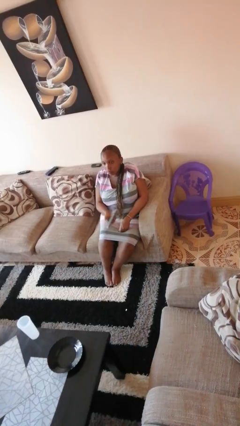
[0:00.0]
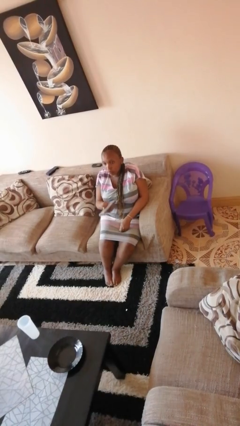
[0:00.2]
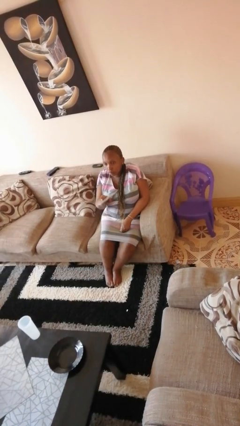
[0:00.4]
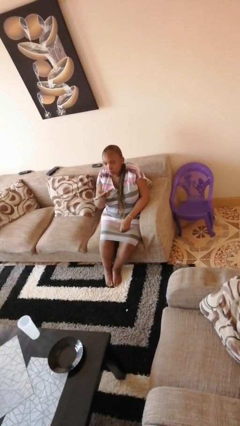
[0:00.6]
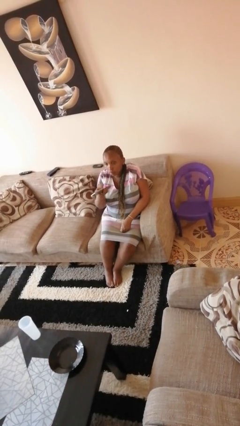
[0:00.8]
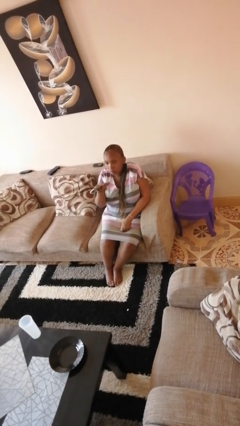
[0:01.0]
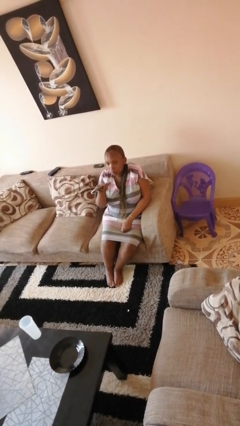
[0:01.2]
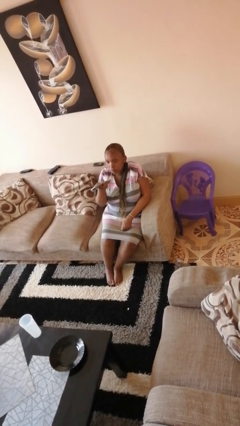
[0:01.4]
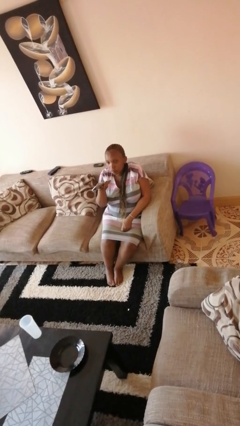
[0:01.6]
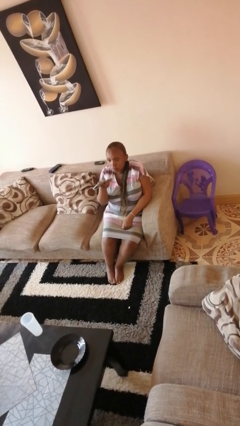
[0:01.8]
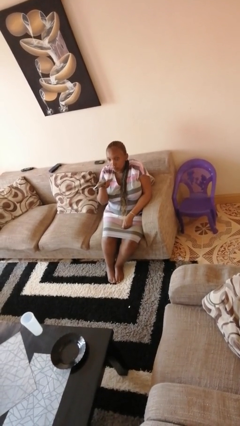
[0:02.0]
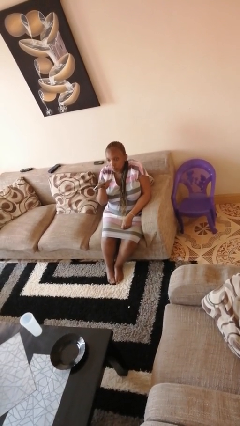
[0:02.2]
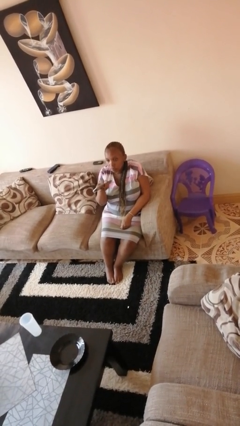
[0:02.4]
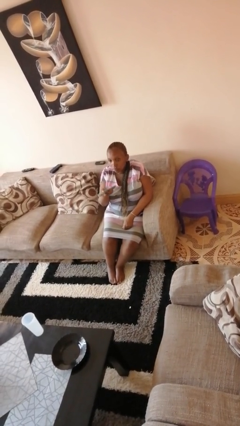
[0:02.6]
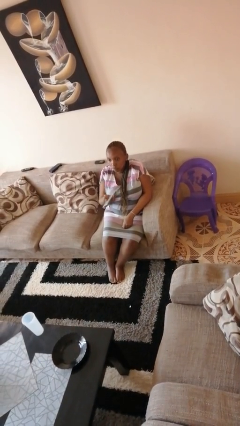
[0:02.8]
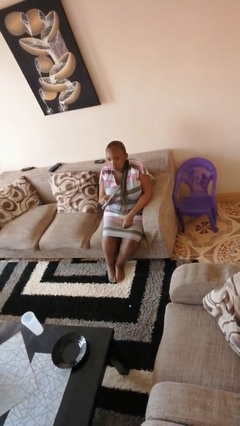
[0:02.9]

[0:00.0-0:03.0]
person uses television remote

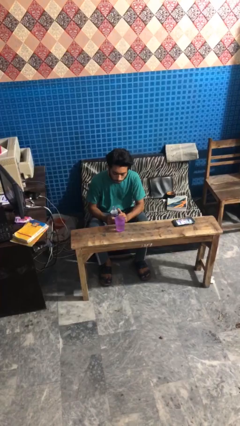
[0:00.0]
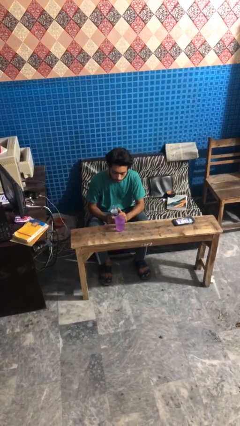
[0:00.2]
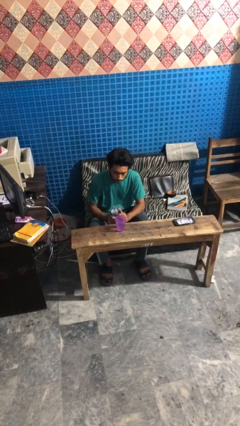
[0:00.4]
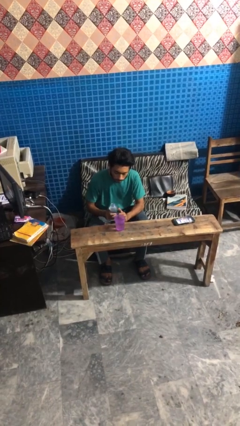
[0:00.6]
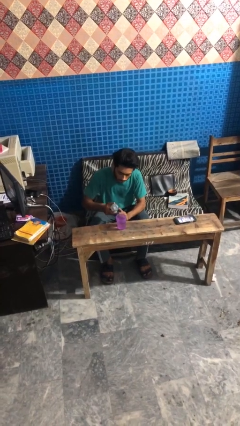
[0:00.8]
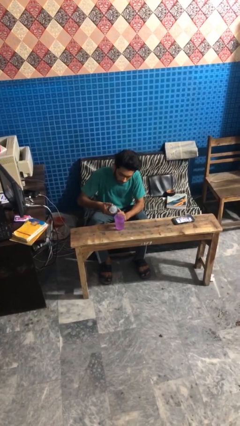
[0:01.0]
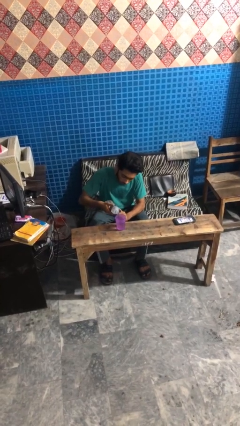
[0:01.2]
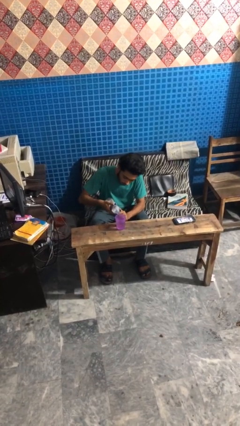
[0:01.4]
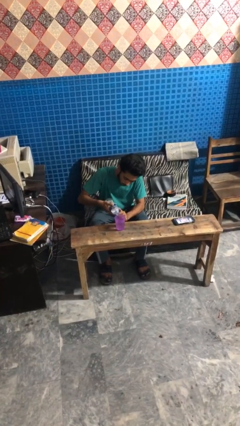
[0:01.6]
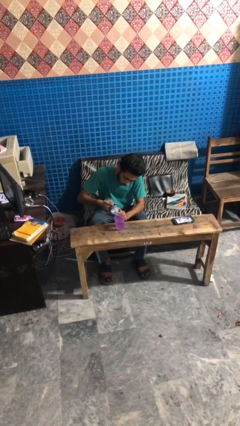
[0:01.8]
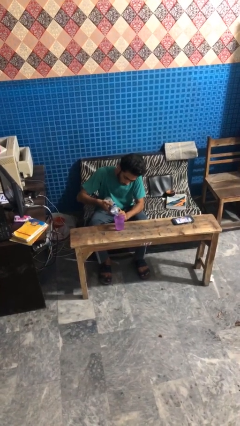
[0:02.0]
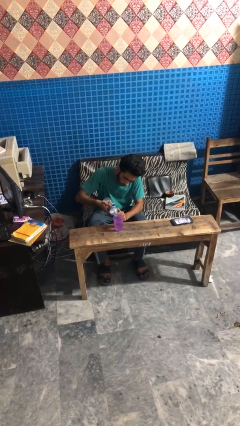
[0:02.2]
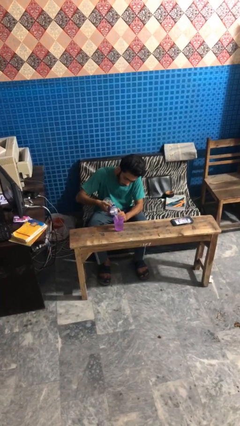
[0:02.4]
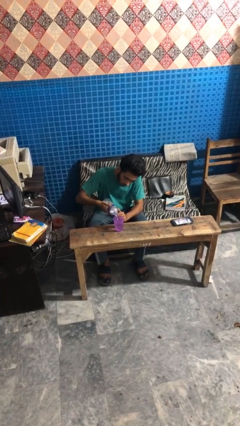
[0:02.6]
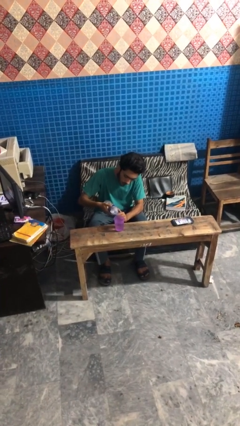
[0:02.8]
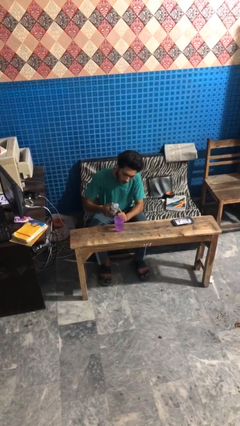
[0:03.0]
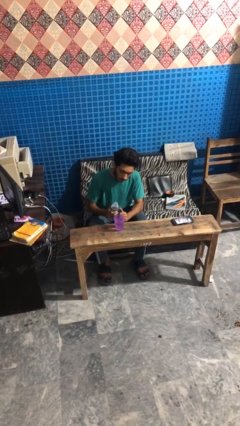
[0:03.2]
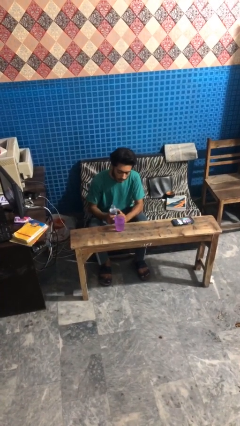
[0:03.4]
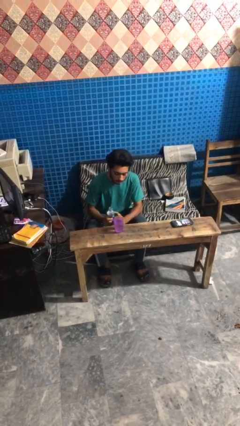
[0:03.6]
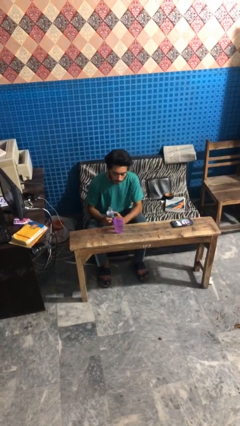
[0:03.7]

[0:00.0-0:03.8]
person pours liquid into cup

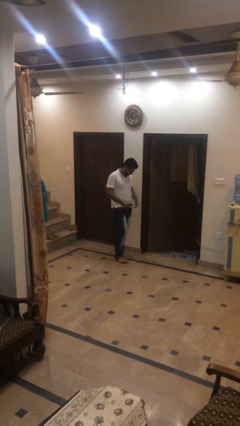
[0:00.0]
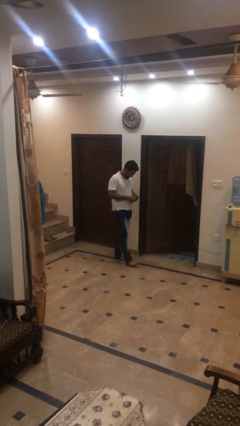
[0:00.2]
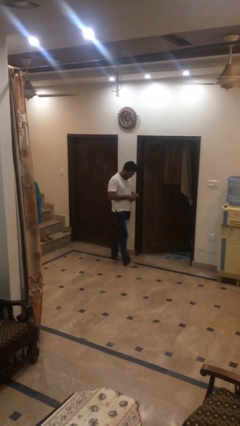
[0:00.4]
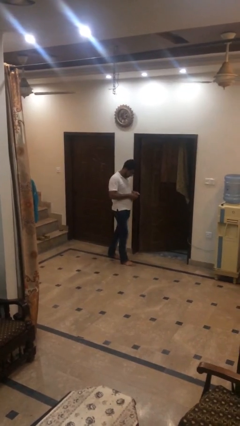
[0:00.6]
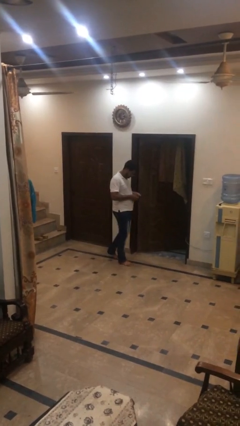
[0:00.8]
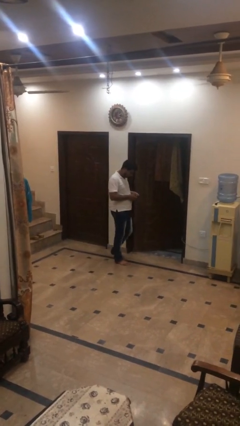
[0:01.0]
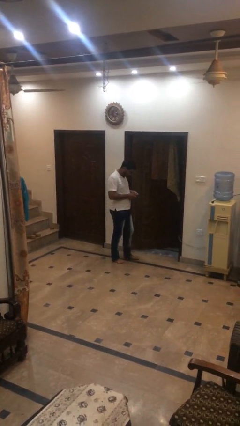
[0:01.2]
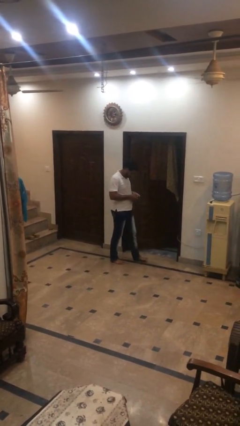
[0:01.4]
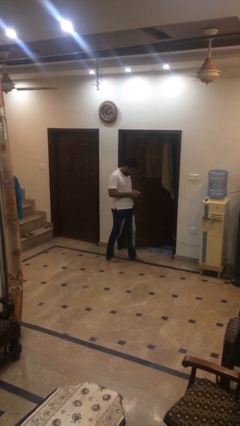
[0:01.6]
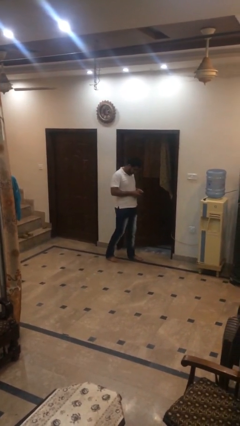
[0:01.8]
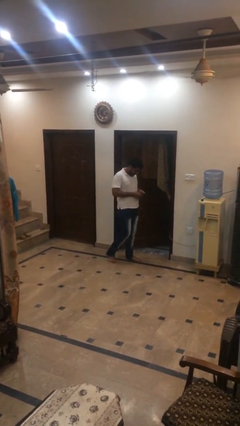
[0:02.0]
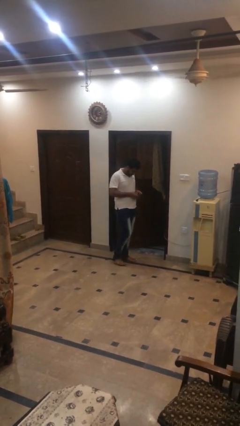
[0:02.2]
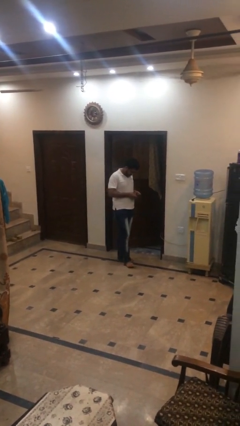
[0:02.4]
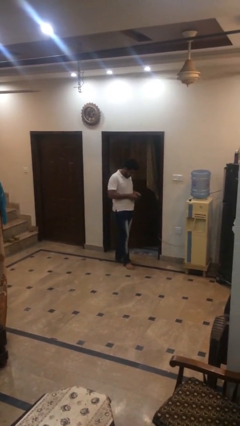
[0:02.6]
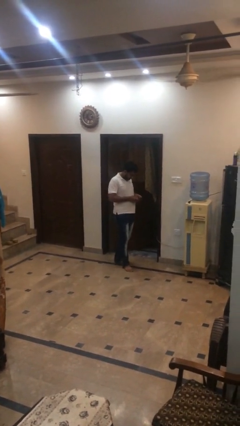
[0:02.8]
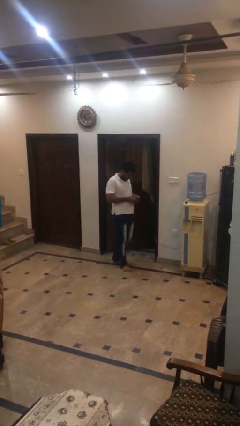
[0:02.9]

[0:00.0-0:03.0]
person texts on phone

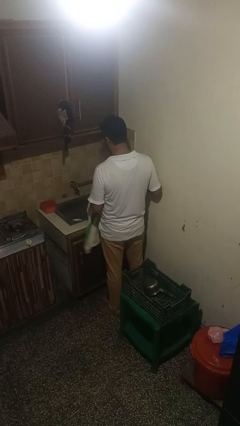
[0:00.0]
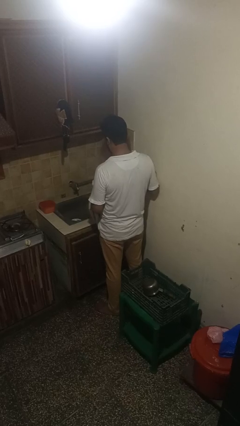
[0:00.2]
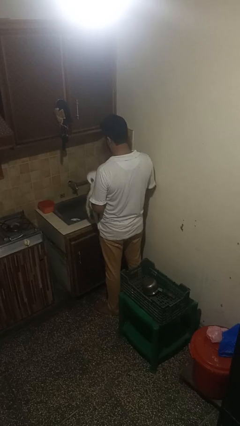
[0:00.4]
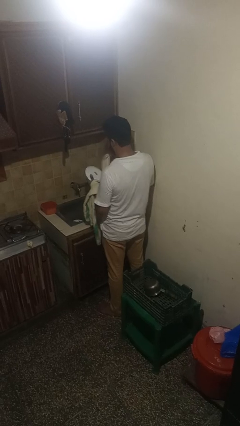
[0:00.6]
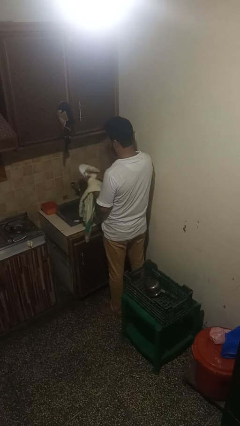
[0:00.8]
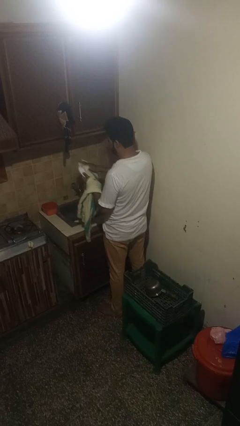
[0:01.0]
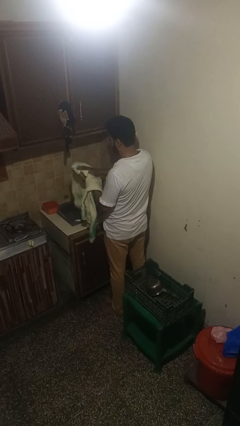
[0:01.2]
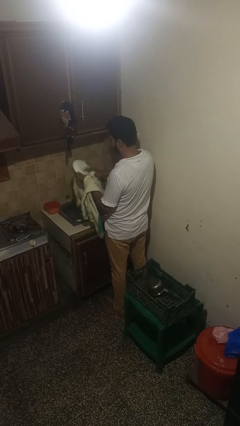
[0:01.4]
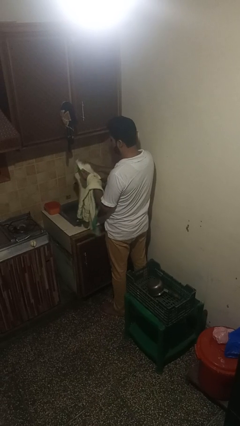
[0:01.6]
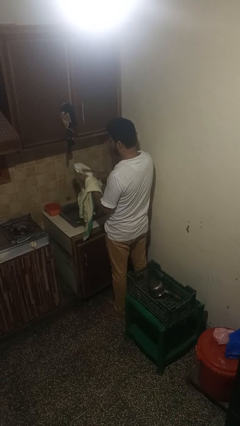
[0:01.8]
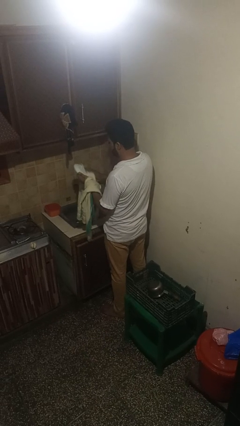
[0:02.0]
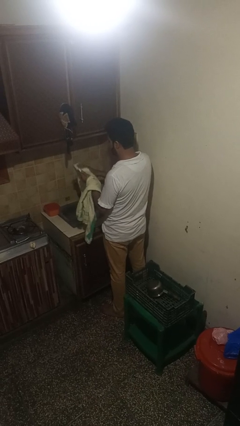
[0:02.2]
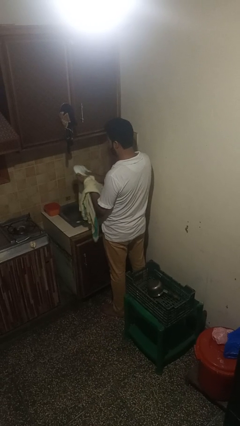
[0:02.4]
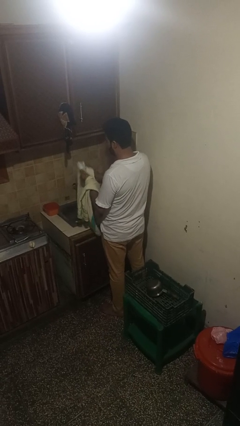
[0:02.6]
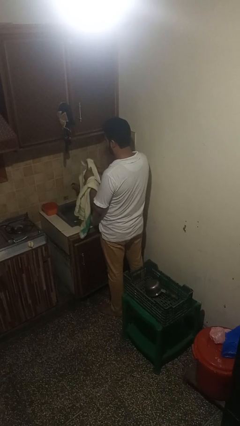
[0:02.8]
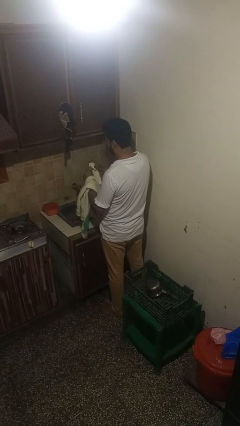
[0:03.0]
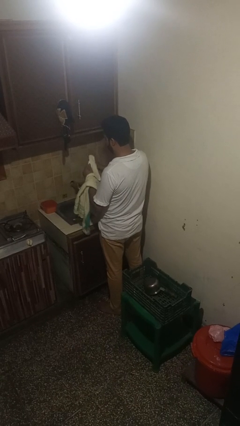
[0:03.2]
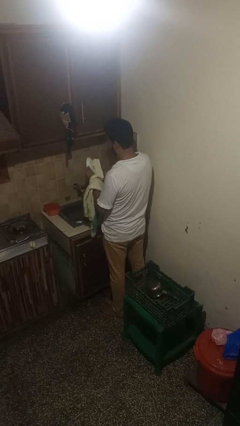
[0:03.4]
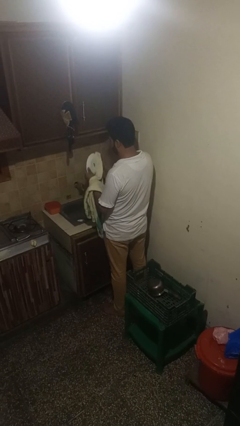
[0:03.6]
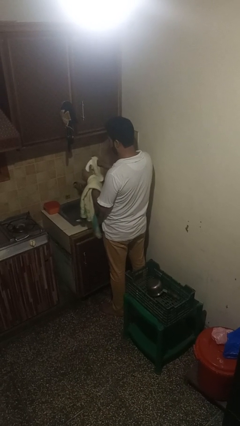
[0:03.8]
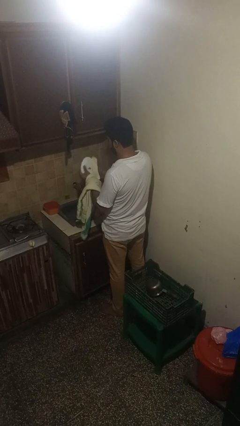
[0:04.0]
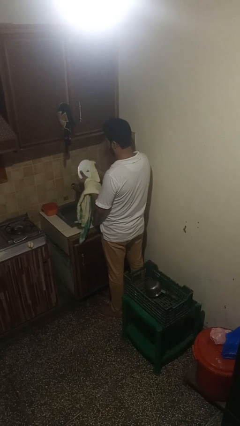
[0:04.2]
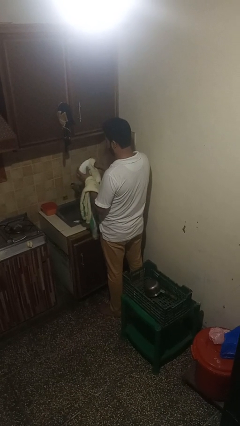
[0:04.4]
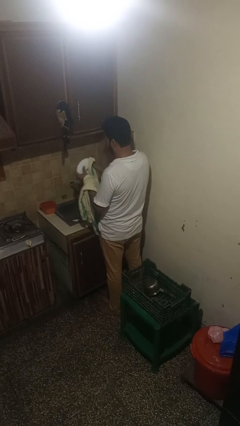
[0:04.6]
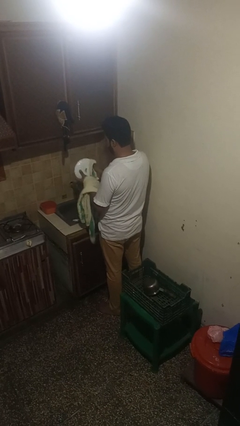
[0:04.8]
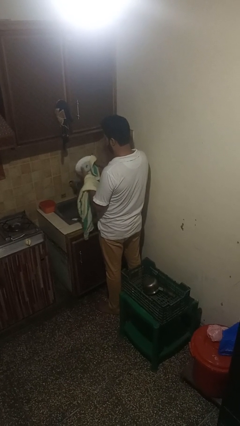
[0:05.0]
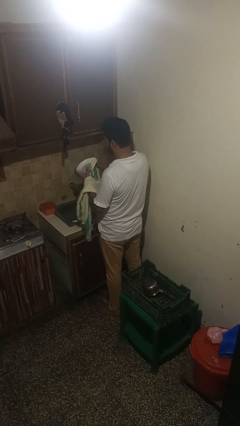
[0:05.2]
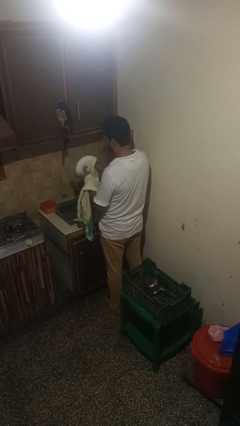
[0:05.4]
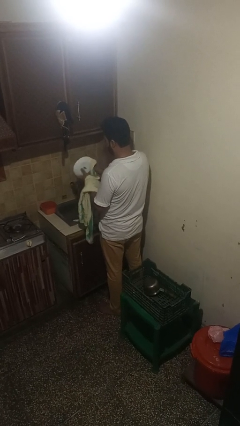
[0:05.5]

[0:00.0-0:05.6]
person dries dish

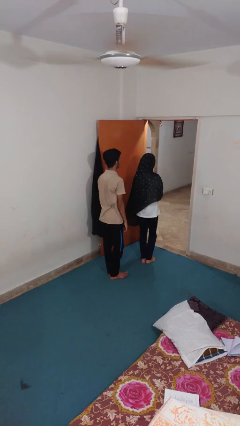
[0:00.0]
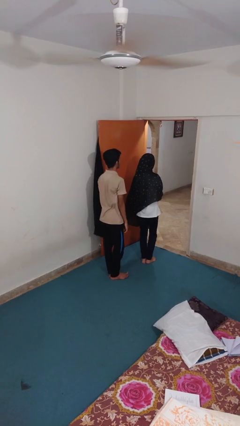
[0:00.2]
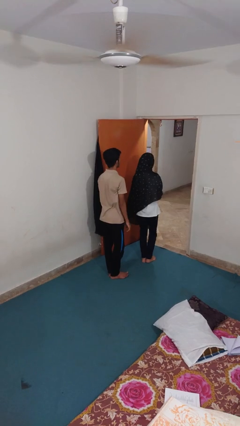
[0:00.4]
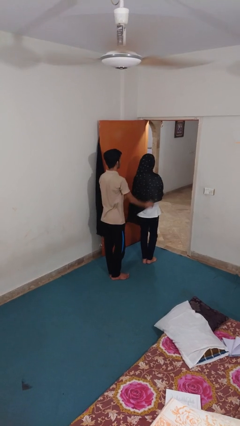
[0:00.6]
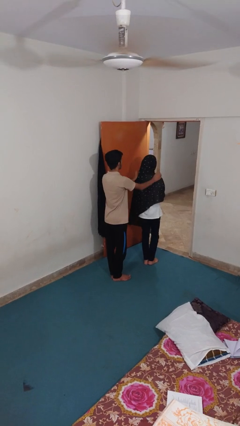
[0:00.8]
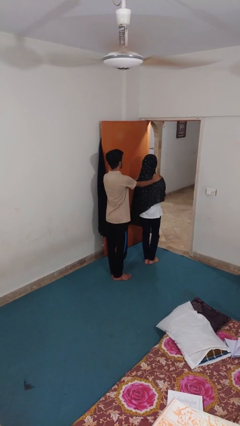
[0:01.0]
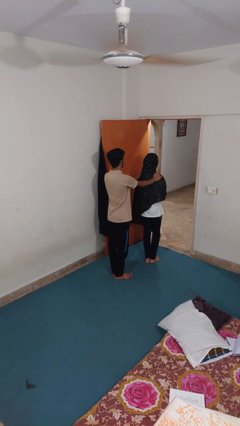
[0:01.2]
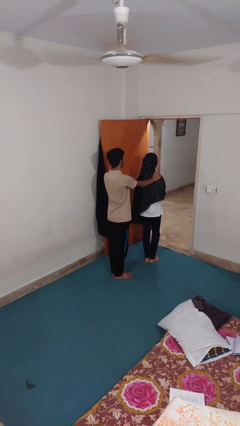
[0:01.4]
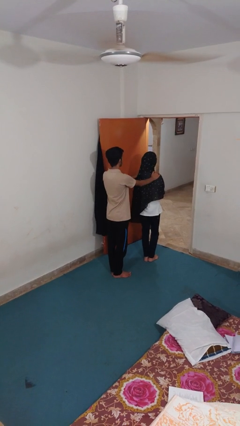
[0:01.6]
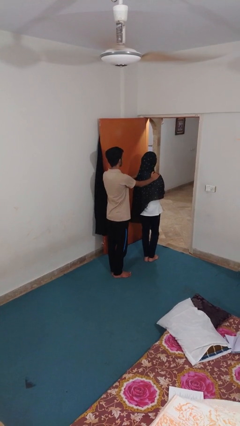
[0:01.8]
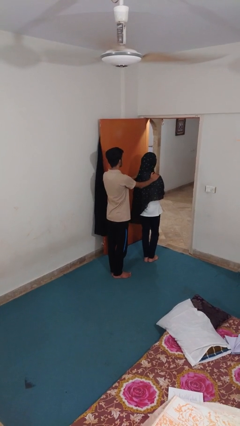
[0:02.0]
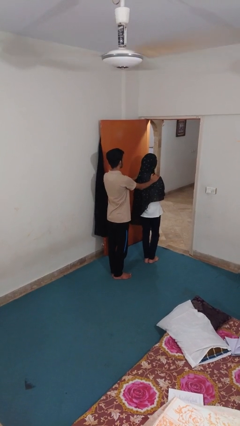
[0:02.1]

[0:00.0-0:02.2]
person grabs person by shoulder
